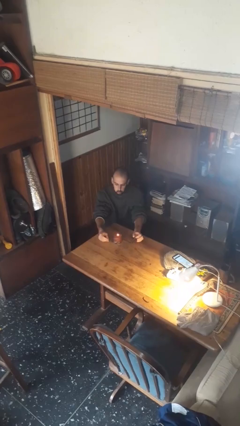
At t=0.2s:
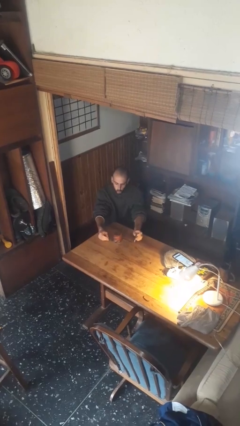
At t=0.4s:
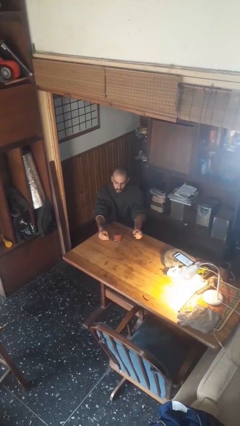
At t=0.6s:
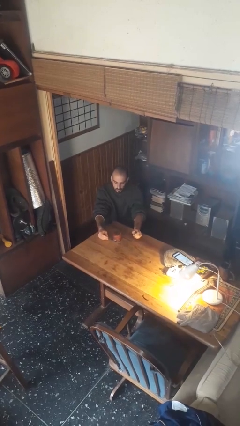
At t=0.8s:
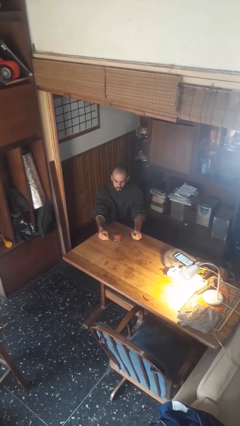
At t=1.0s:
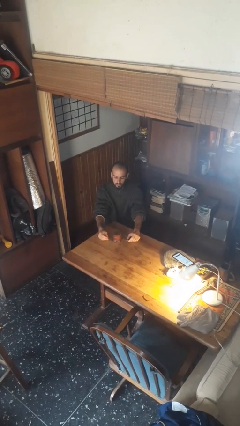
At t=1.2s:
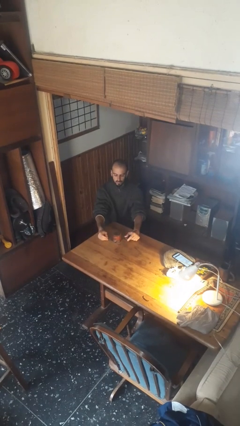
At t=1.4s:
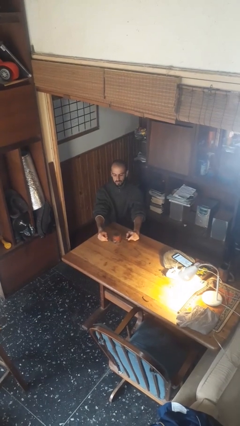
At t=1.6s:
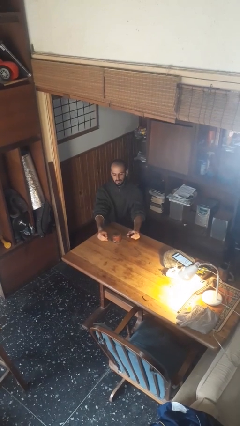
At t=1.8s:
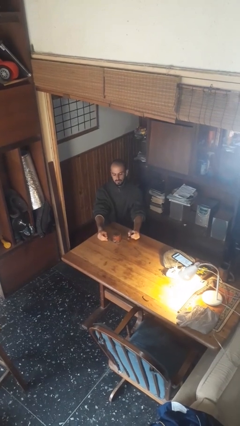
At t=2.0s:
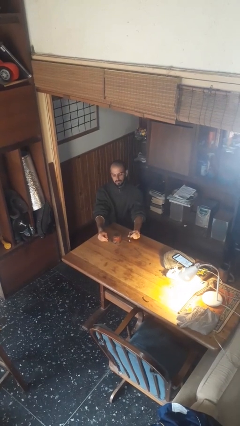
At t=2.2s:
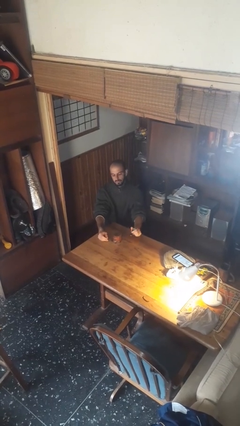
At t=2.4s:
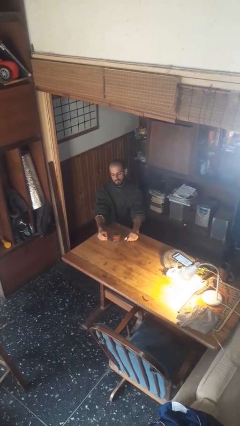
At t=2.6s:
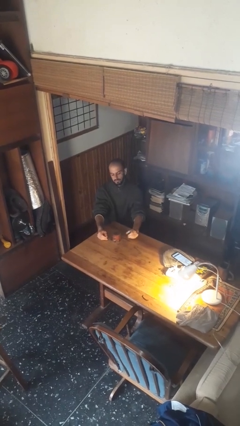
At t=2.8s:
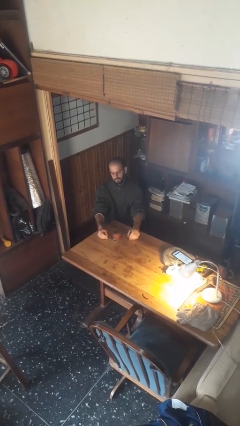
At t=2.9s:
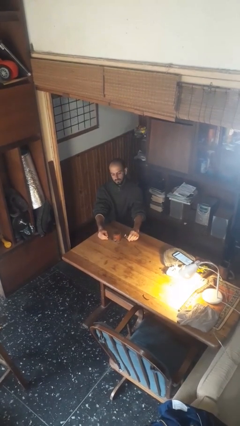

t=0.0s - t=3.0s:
person extinguishes candle

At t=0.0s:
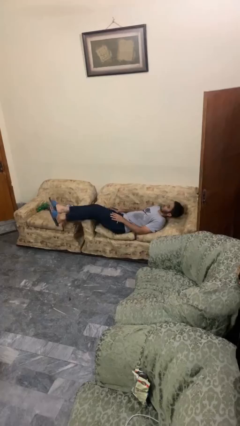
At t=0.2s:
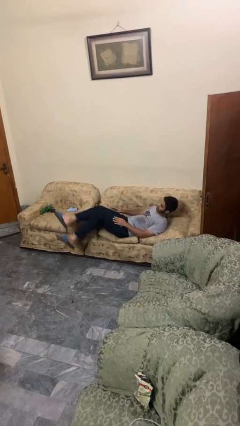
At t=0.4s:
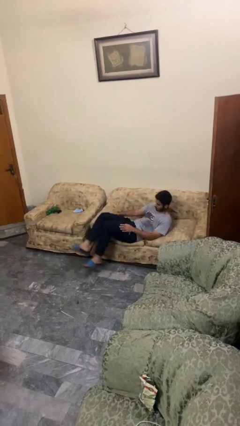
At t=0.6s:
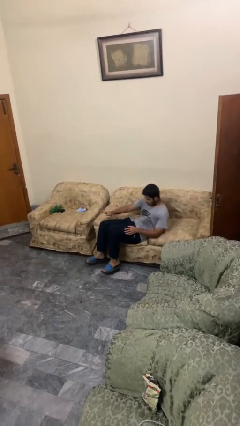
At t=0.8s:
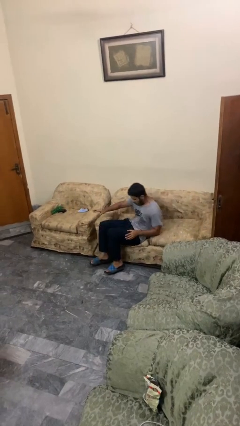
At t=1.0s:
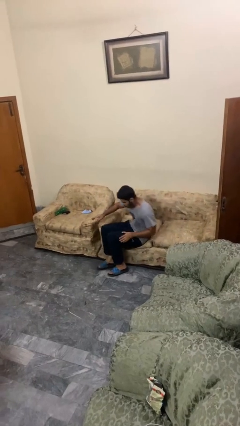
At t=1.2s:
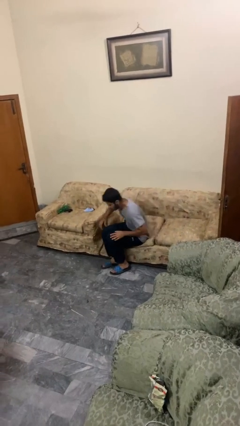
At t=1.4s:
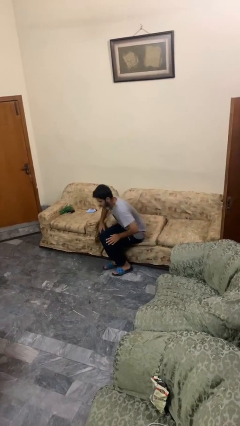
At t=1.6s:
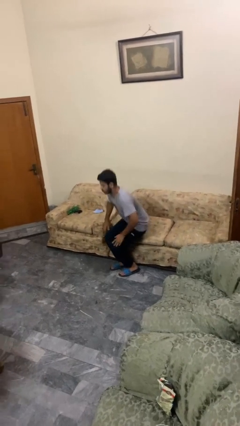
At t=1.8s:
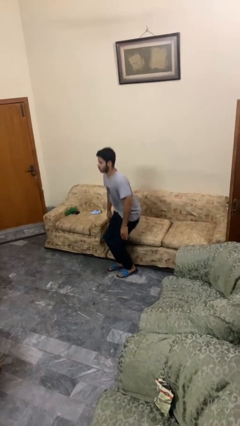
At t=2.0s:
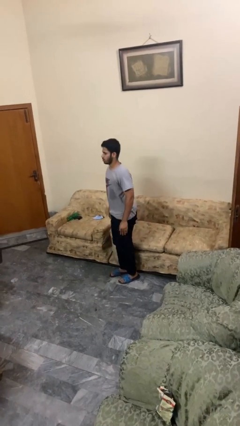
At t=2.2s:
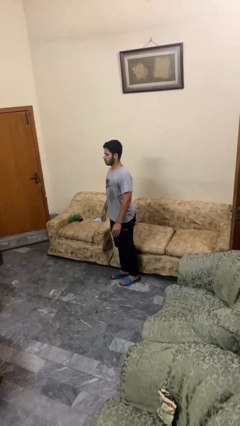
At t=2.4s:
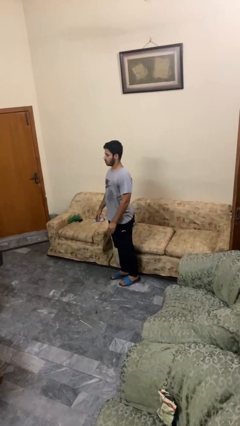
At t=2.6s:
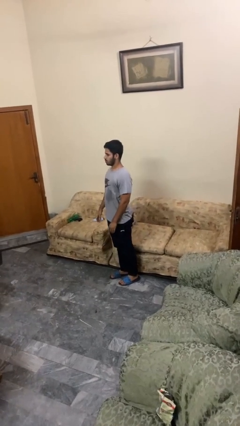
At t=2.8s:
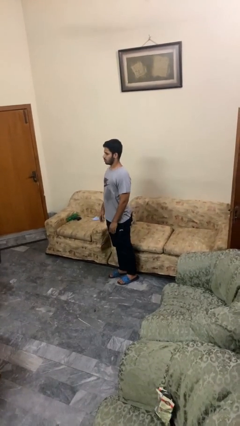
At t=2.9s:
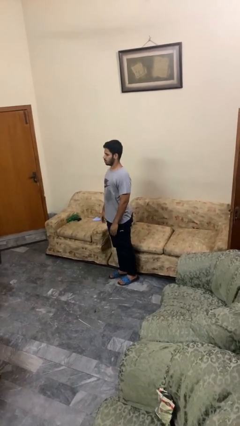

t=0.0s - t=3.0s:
person stands up

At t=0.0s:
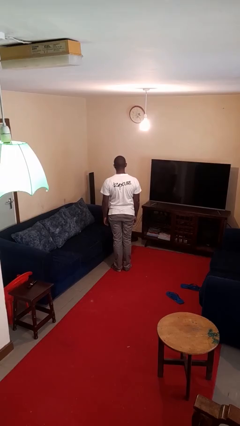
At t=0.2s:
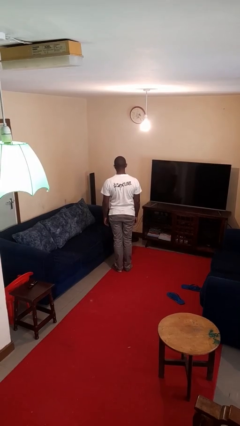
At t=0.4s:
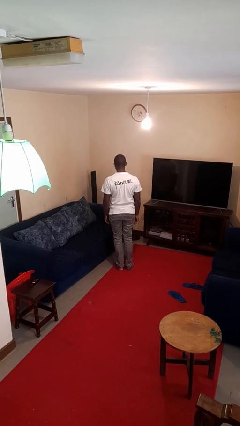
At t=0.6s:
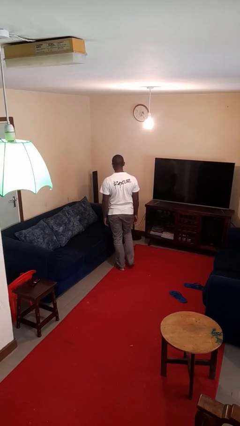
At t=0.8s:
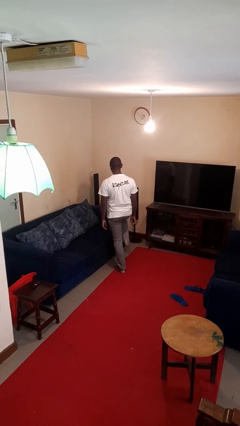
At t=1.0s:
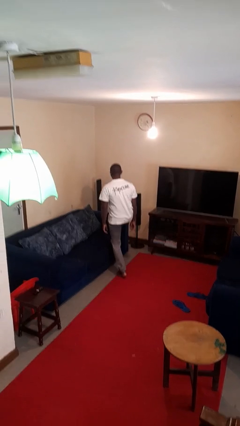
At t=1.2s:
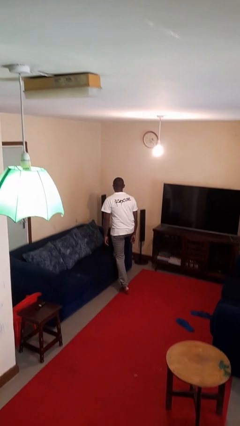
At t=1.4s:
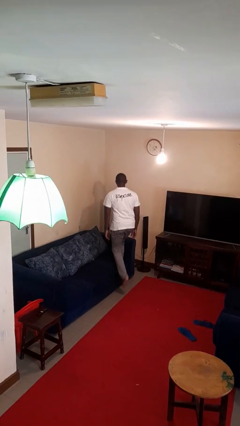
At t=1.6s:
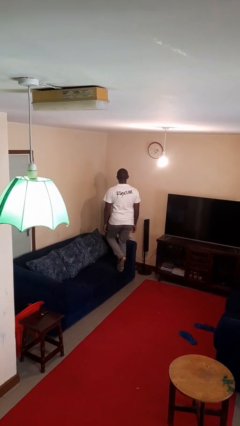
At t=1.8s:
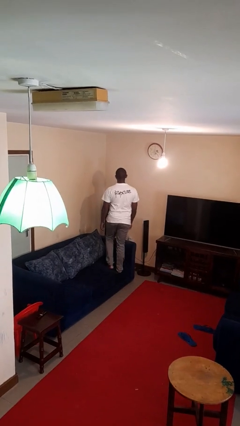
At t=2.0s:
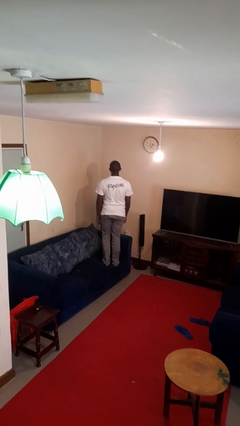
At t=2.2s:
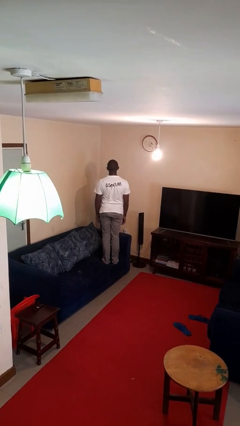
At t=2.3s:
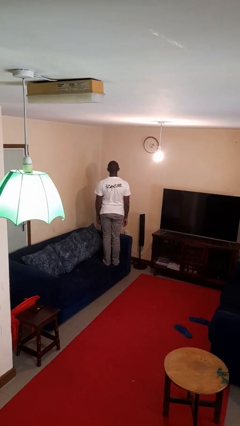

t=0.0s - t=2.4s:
person climbs on couch

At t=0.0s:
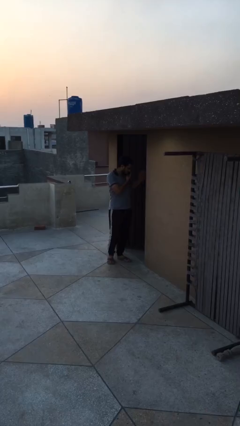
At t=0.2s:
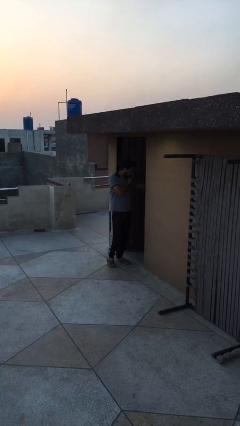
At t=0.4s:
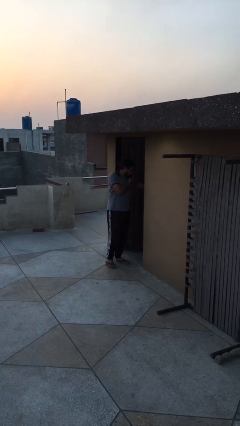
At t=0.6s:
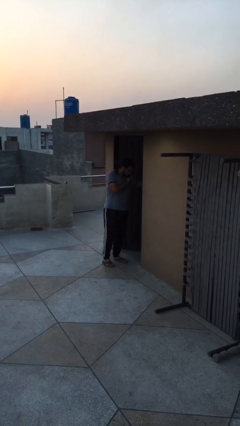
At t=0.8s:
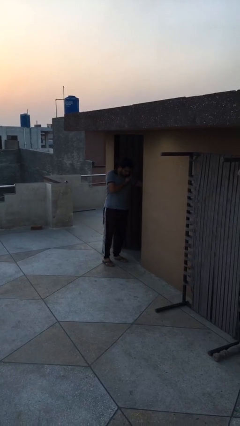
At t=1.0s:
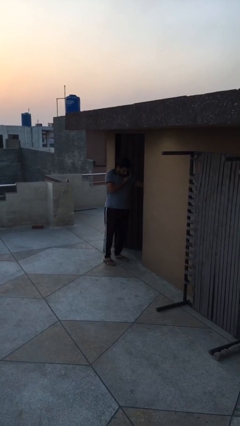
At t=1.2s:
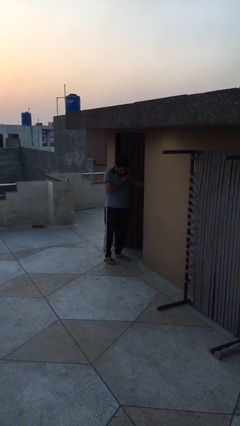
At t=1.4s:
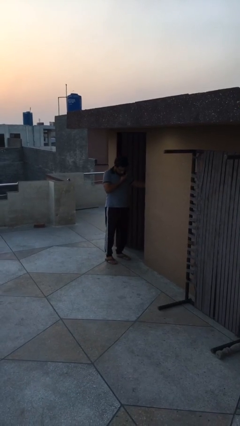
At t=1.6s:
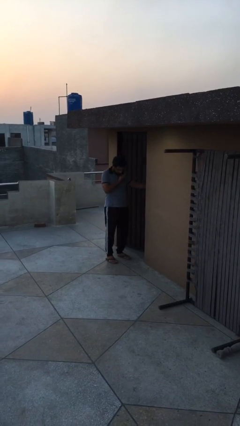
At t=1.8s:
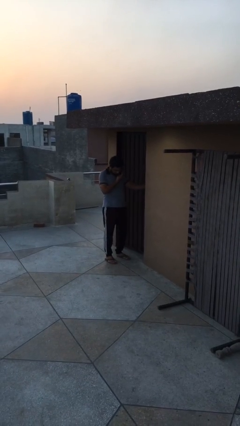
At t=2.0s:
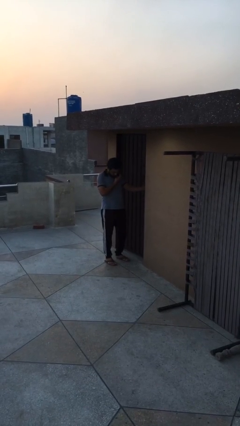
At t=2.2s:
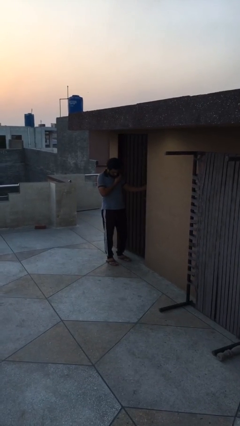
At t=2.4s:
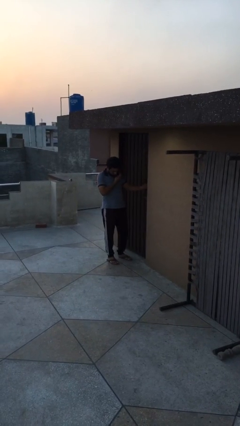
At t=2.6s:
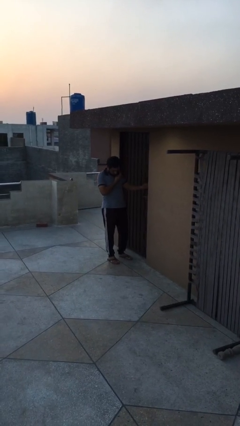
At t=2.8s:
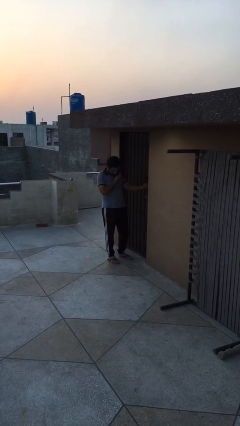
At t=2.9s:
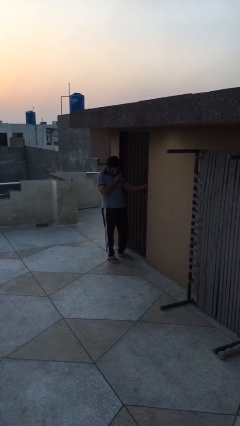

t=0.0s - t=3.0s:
person closes facility door

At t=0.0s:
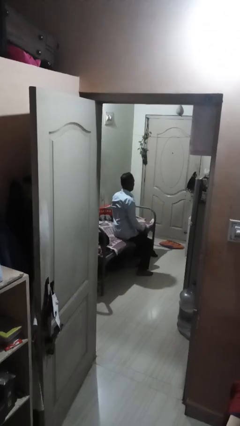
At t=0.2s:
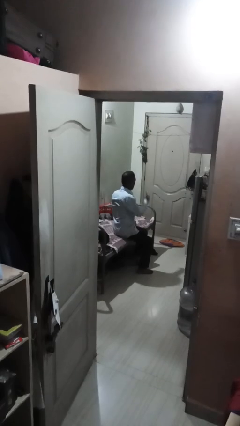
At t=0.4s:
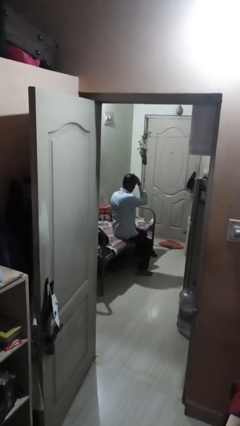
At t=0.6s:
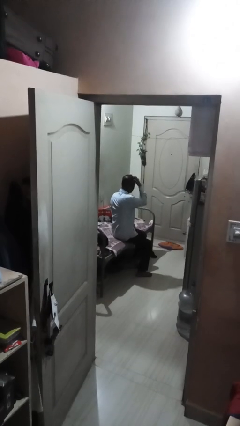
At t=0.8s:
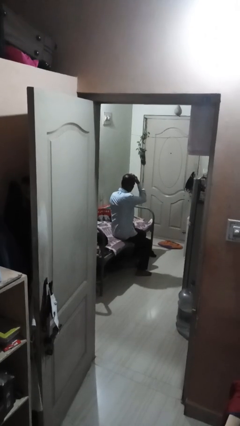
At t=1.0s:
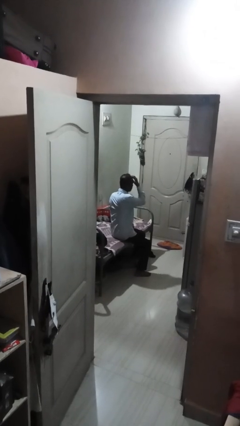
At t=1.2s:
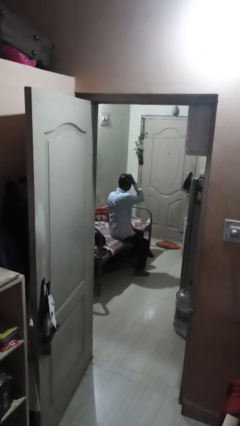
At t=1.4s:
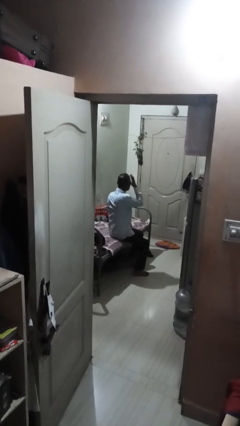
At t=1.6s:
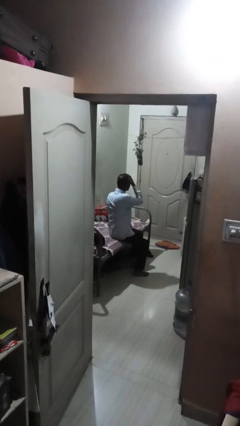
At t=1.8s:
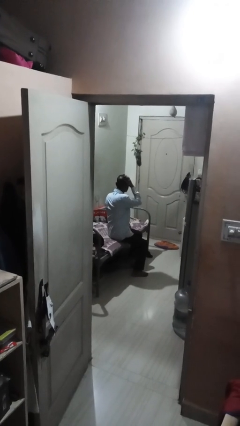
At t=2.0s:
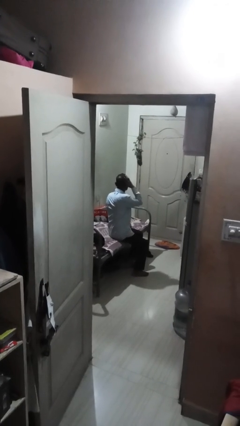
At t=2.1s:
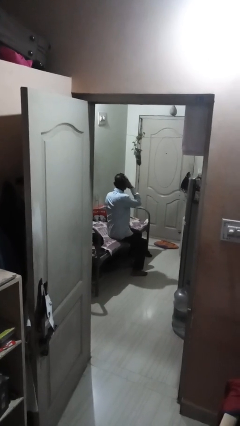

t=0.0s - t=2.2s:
person strokes hair

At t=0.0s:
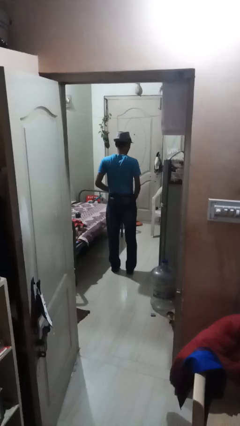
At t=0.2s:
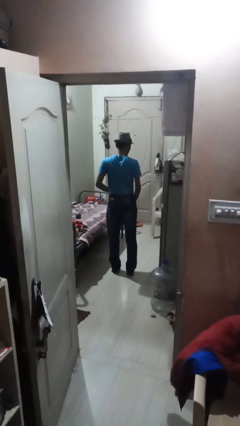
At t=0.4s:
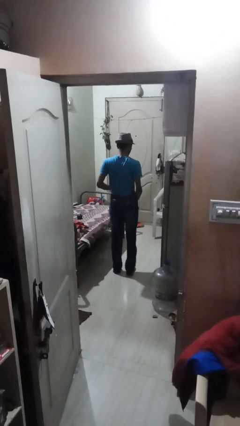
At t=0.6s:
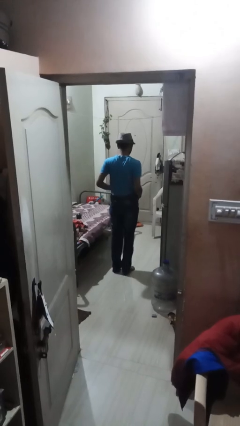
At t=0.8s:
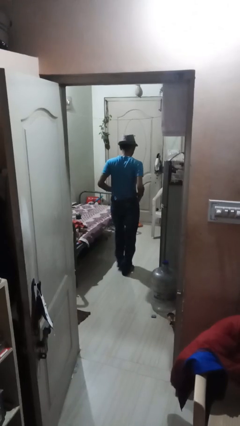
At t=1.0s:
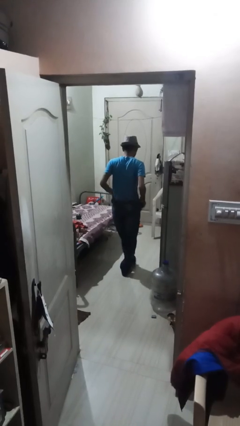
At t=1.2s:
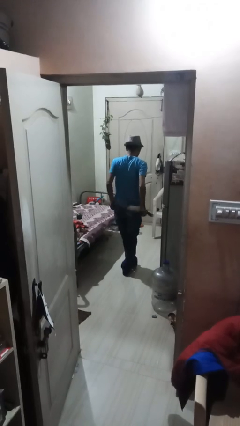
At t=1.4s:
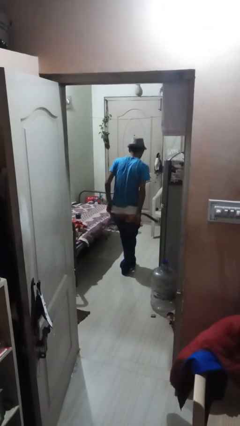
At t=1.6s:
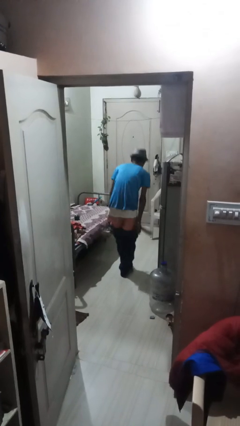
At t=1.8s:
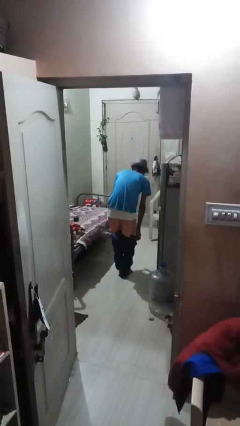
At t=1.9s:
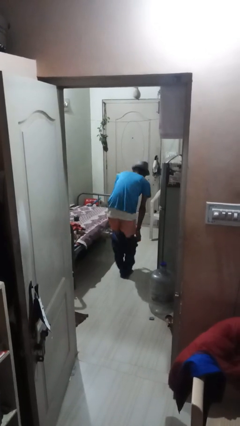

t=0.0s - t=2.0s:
person takes off pants

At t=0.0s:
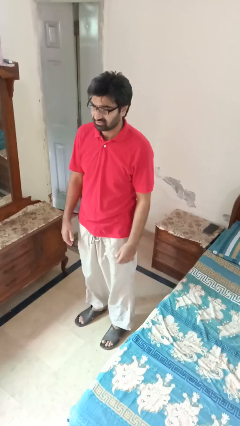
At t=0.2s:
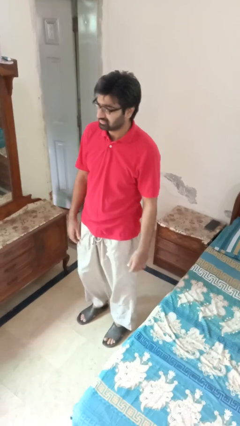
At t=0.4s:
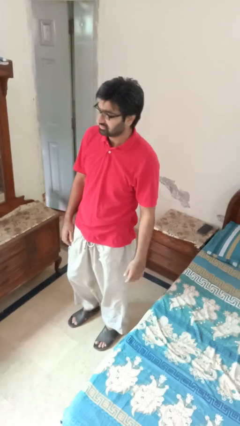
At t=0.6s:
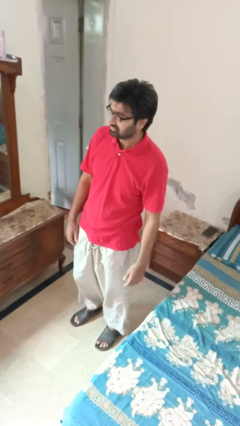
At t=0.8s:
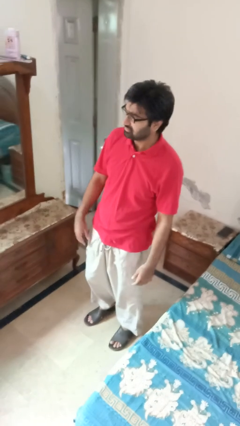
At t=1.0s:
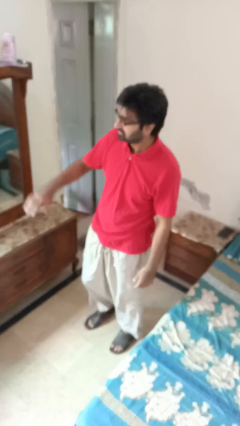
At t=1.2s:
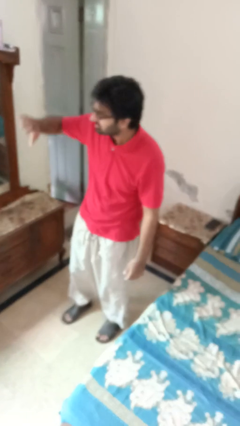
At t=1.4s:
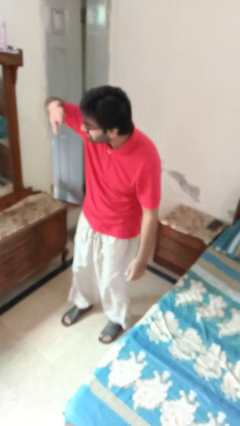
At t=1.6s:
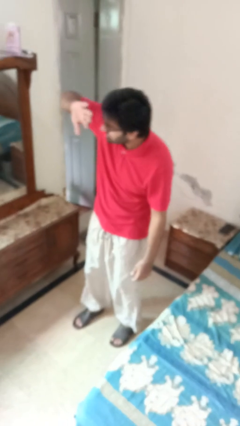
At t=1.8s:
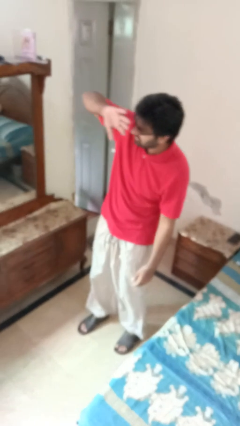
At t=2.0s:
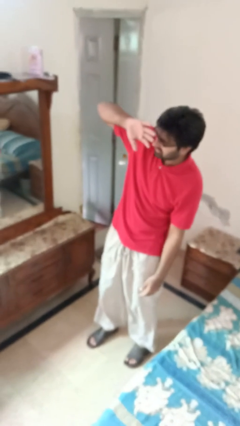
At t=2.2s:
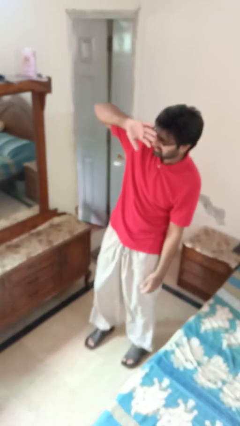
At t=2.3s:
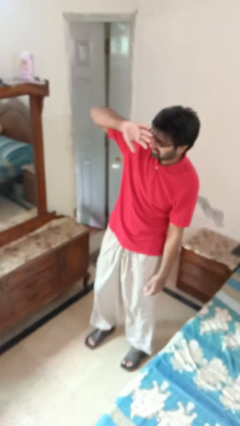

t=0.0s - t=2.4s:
person shades eyes
